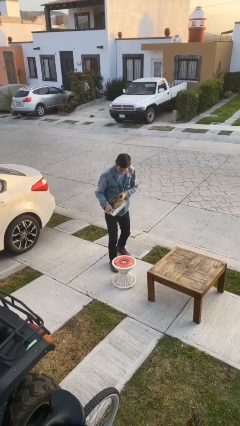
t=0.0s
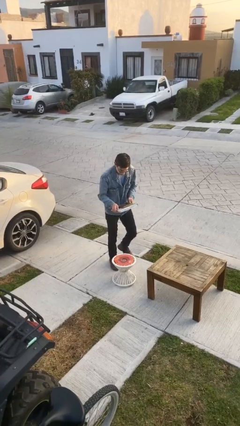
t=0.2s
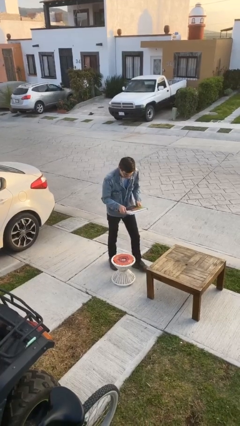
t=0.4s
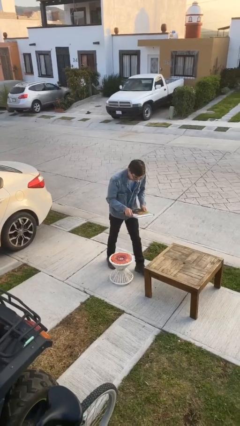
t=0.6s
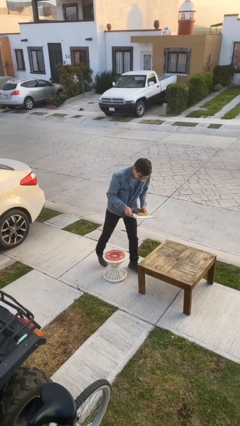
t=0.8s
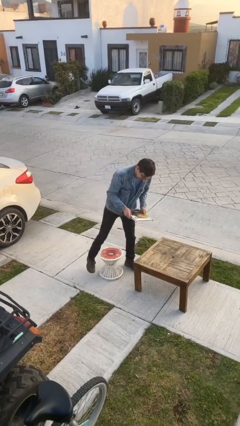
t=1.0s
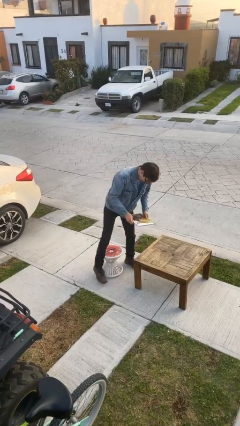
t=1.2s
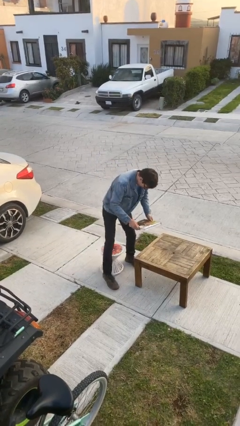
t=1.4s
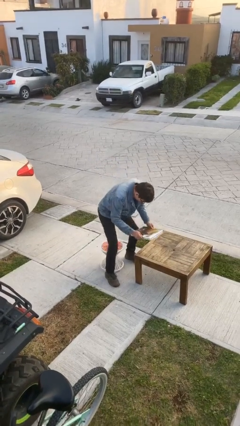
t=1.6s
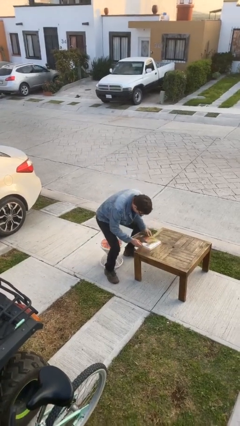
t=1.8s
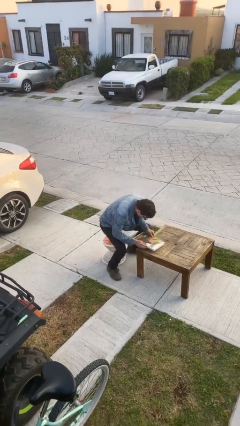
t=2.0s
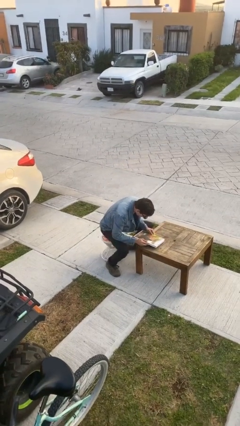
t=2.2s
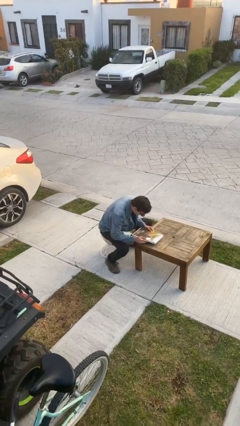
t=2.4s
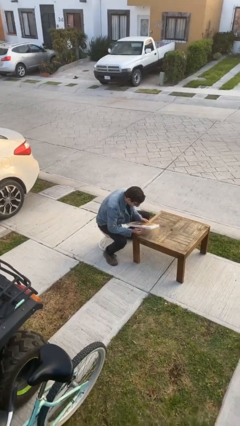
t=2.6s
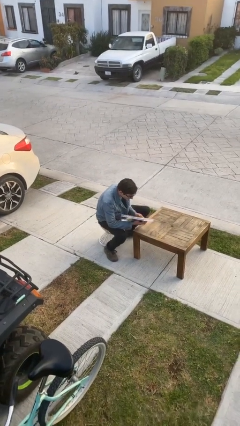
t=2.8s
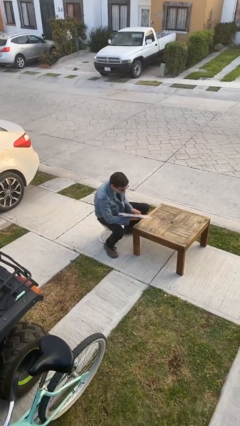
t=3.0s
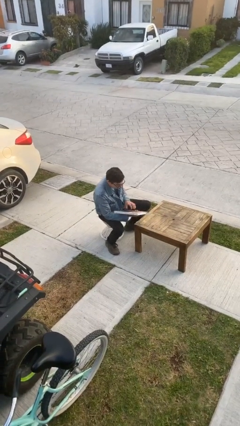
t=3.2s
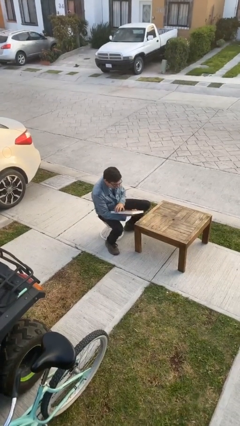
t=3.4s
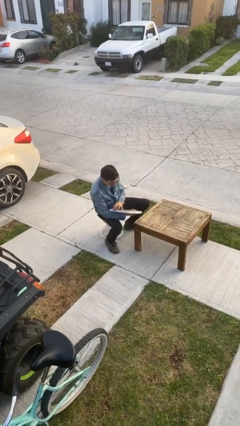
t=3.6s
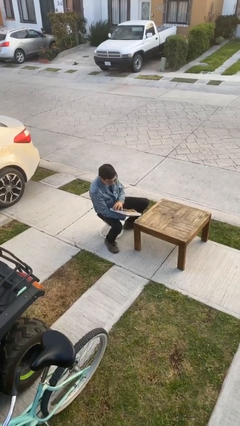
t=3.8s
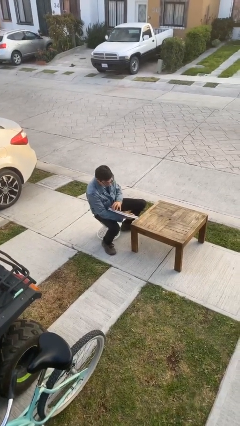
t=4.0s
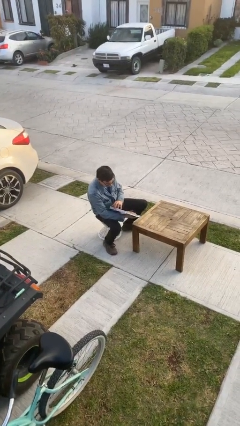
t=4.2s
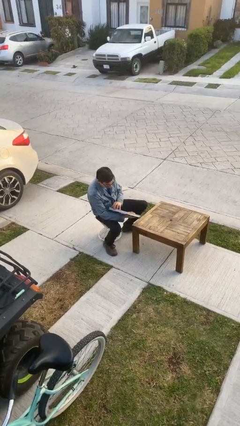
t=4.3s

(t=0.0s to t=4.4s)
person sits down

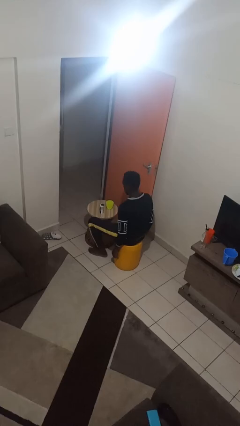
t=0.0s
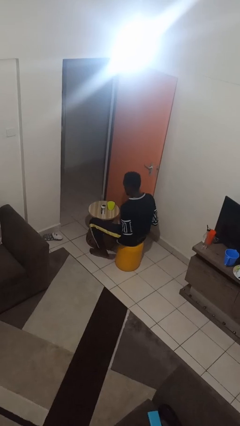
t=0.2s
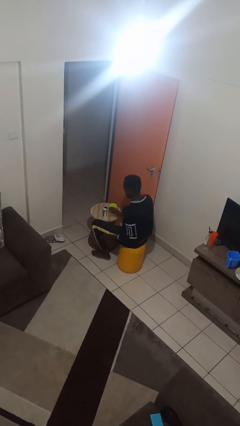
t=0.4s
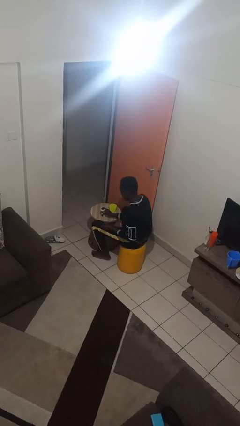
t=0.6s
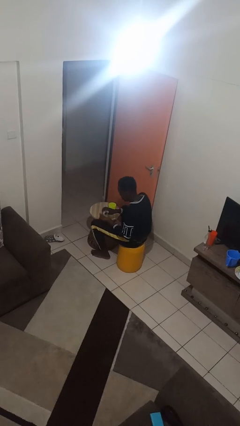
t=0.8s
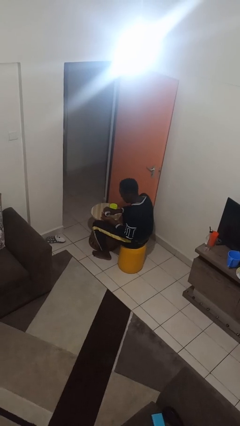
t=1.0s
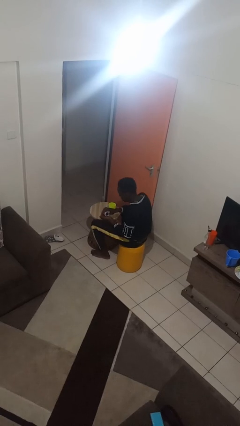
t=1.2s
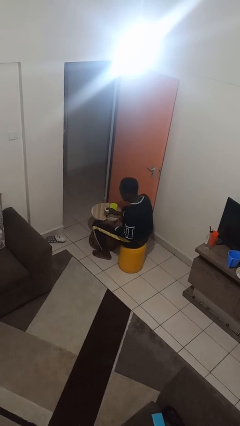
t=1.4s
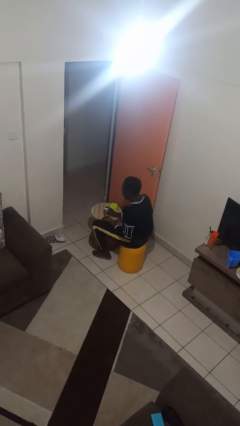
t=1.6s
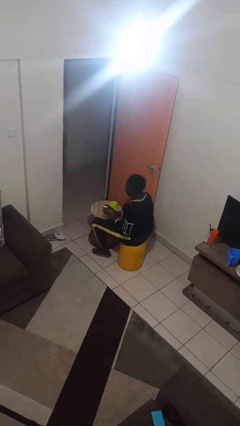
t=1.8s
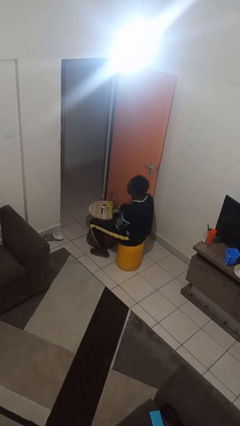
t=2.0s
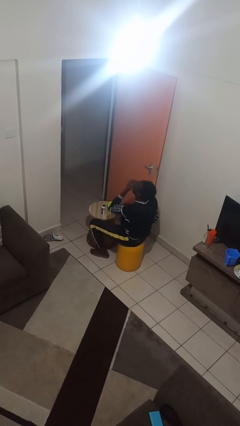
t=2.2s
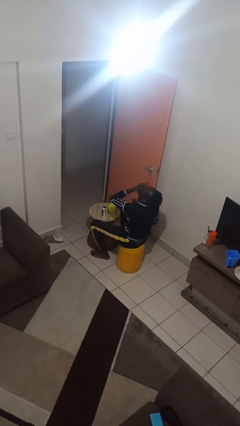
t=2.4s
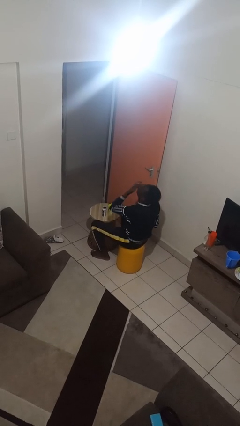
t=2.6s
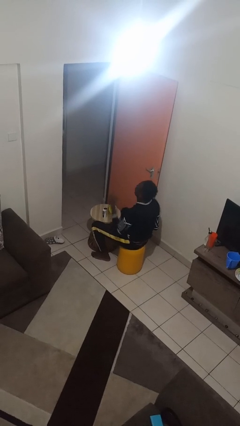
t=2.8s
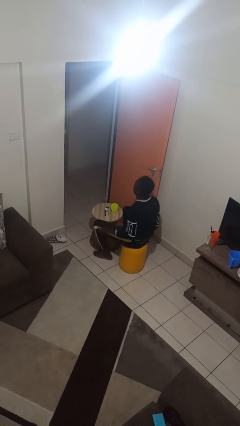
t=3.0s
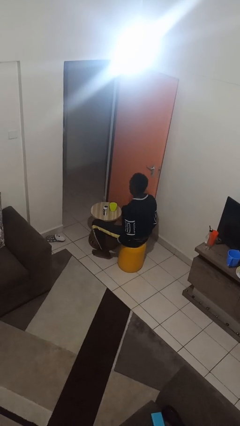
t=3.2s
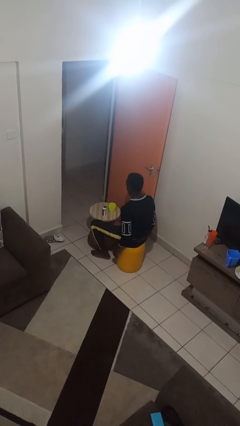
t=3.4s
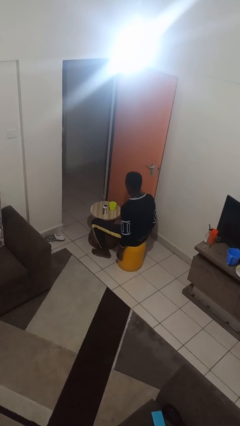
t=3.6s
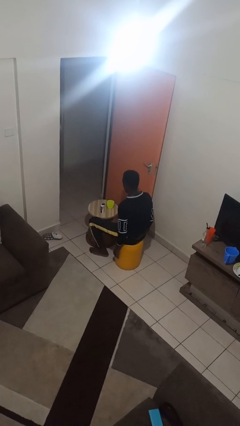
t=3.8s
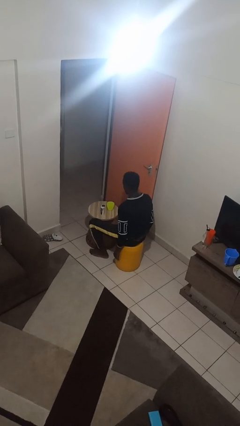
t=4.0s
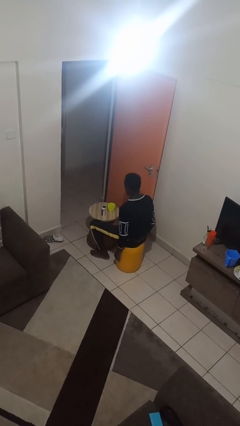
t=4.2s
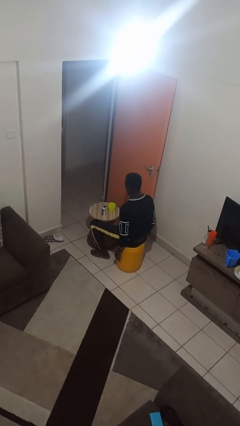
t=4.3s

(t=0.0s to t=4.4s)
person takes medicine pills

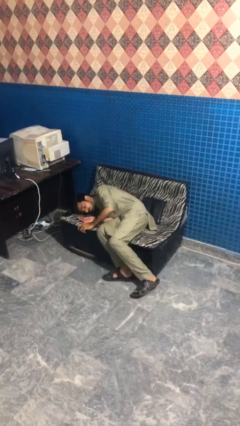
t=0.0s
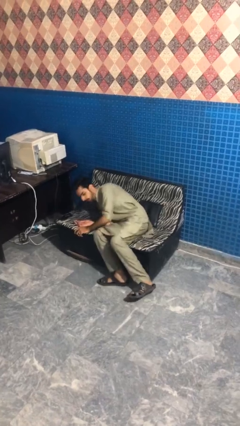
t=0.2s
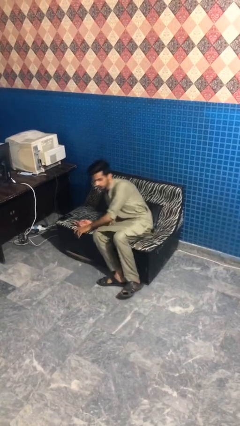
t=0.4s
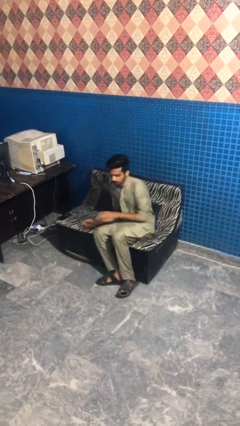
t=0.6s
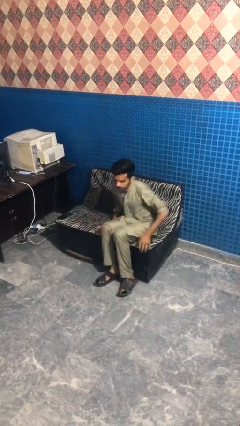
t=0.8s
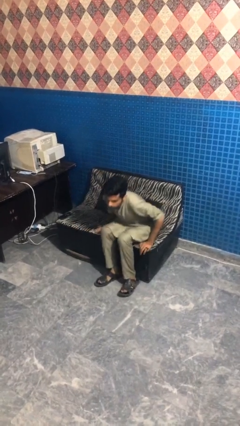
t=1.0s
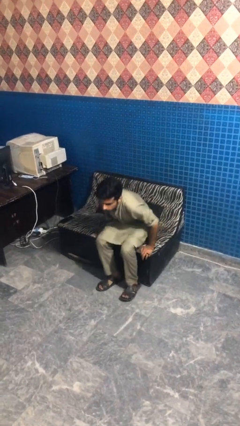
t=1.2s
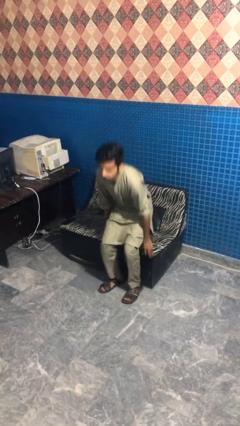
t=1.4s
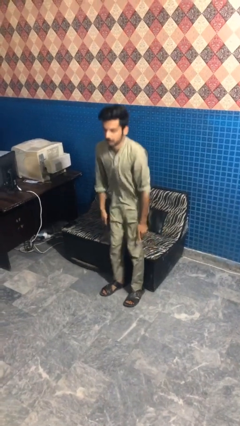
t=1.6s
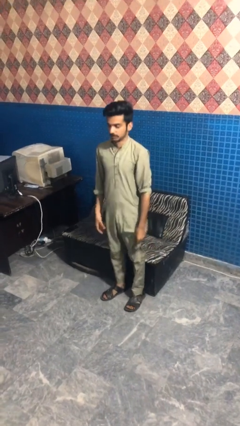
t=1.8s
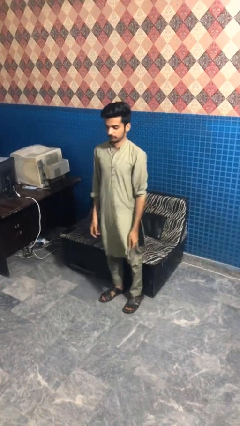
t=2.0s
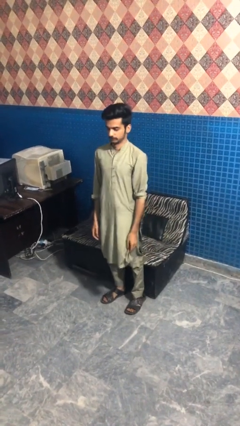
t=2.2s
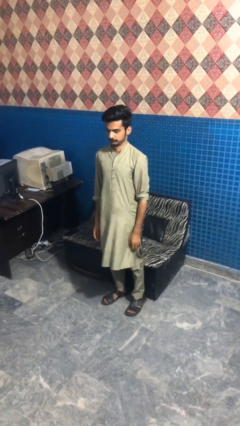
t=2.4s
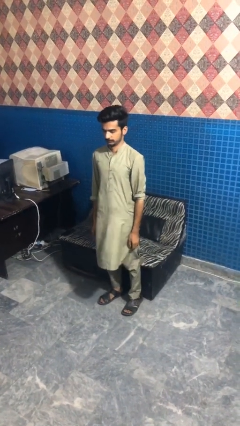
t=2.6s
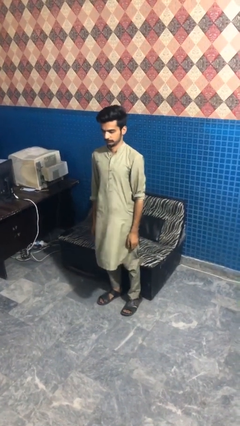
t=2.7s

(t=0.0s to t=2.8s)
person stands up

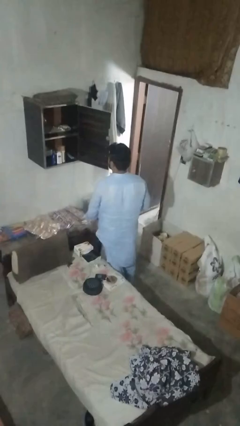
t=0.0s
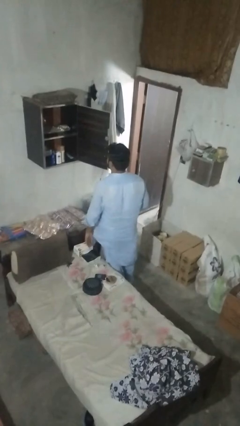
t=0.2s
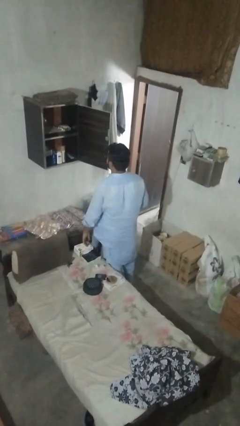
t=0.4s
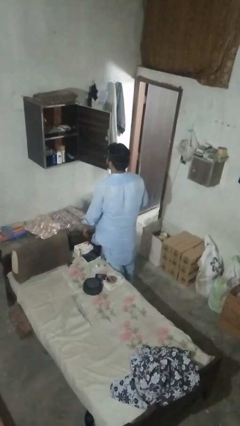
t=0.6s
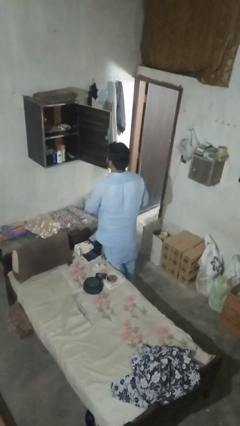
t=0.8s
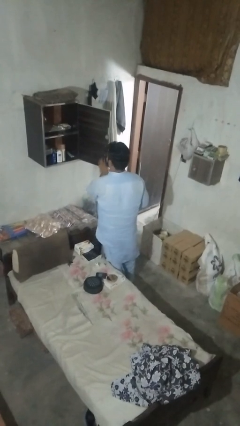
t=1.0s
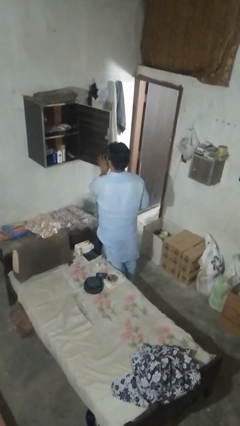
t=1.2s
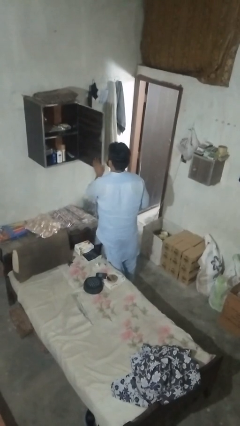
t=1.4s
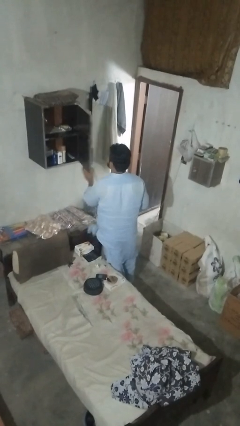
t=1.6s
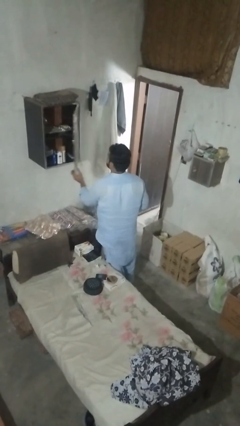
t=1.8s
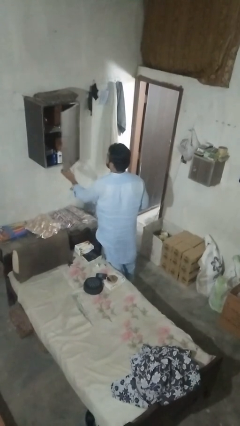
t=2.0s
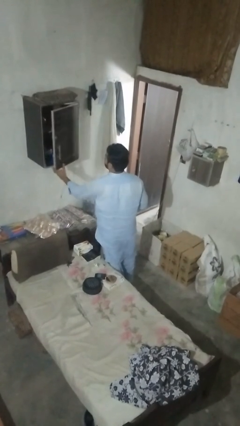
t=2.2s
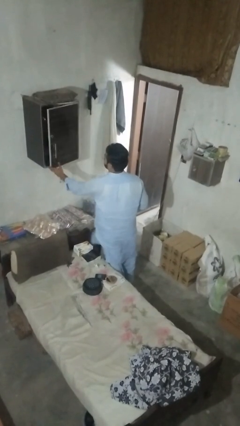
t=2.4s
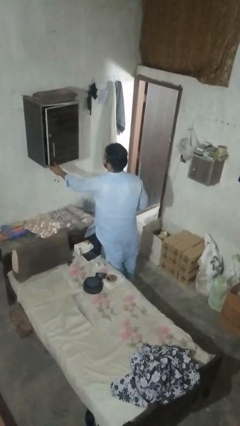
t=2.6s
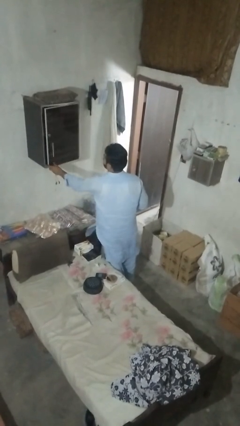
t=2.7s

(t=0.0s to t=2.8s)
person closes dresser drawer

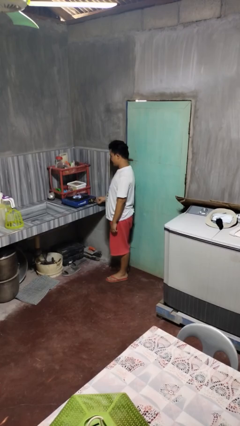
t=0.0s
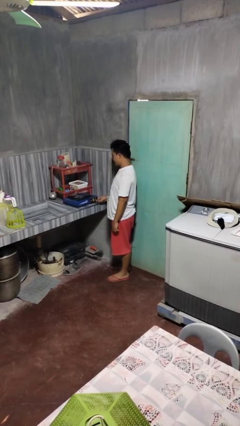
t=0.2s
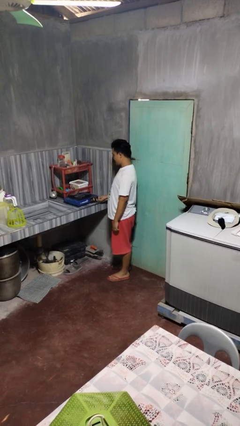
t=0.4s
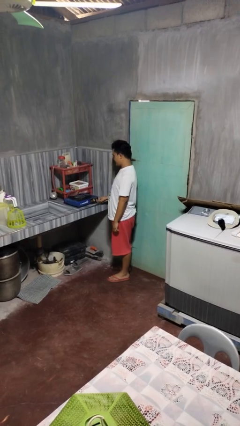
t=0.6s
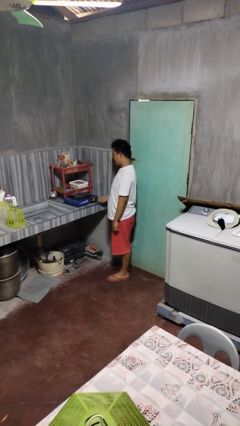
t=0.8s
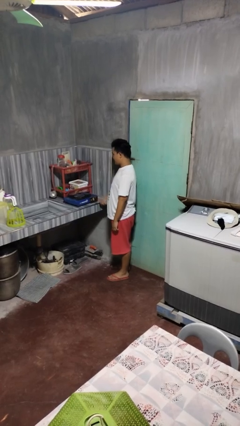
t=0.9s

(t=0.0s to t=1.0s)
person turns off stovetop

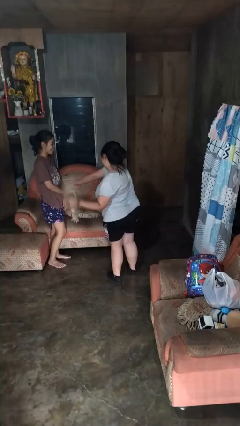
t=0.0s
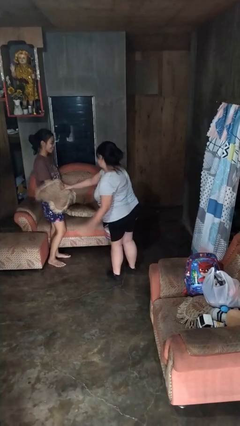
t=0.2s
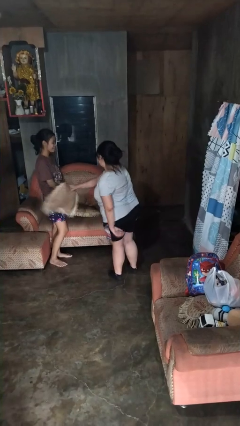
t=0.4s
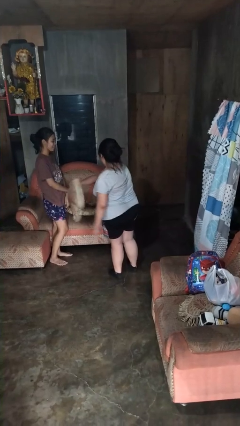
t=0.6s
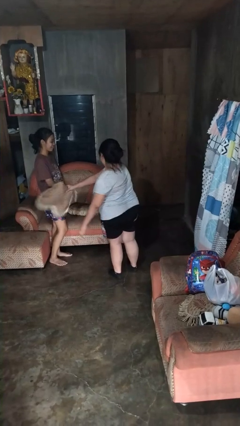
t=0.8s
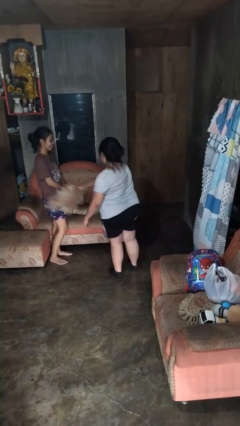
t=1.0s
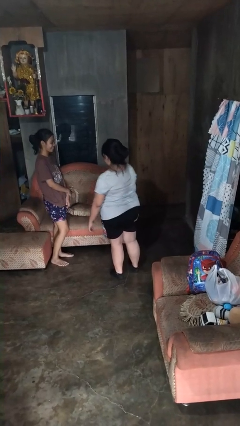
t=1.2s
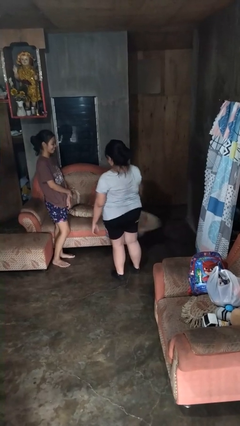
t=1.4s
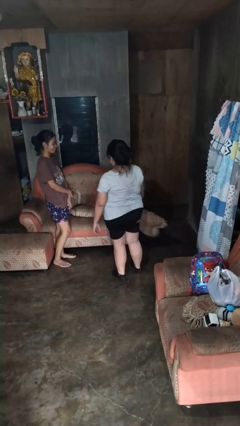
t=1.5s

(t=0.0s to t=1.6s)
person hits person with pillow

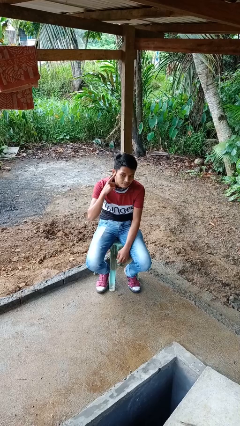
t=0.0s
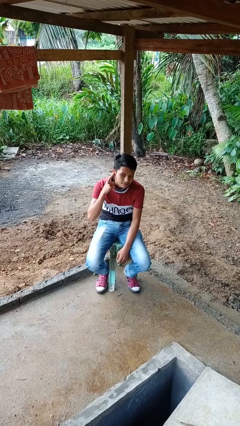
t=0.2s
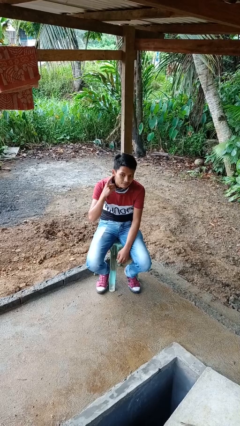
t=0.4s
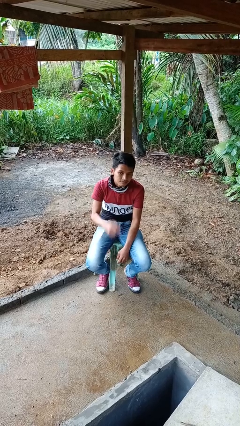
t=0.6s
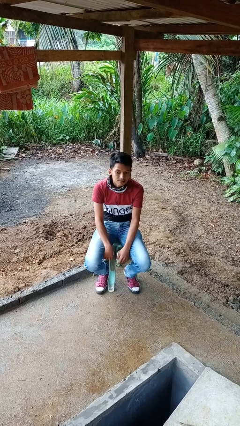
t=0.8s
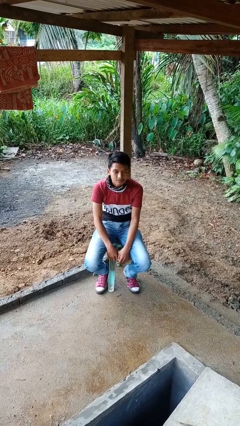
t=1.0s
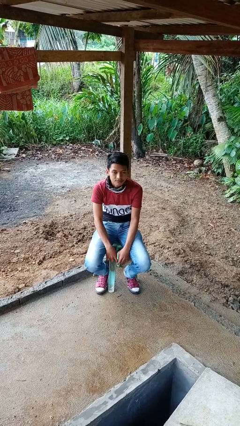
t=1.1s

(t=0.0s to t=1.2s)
person gestures listen closely
